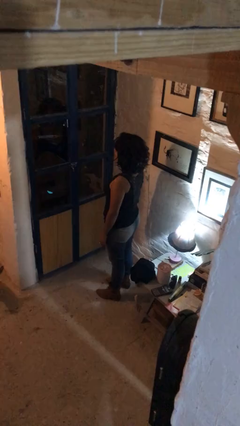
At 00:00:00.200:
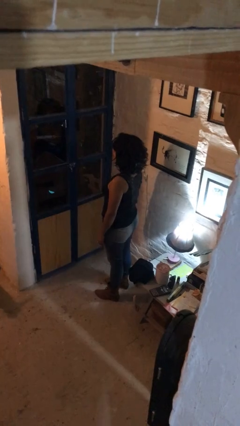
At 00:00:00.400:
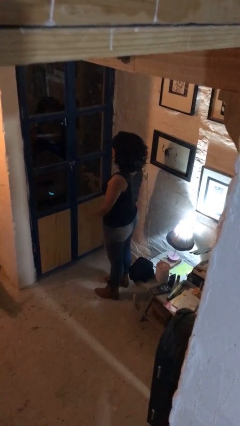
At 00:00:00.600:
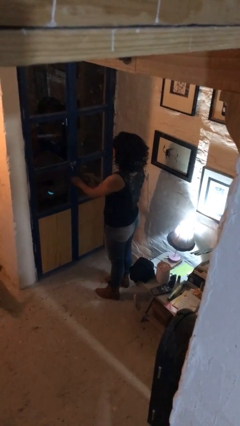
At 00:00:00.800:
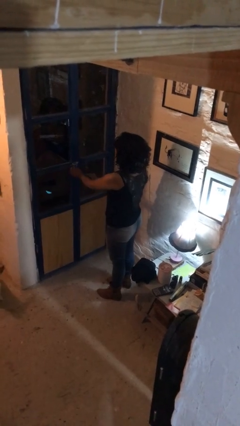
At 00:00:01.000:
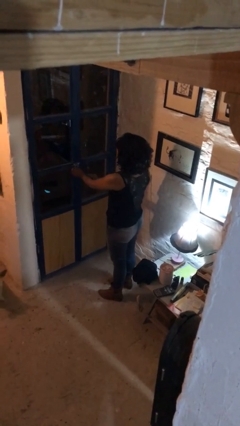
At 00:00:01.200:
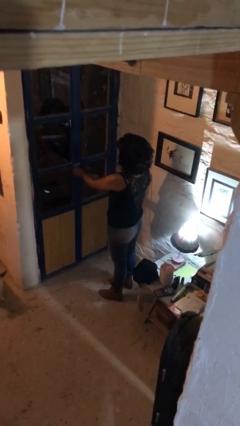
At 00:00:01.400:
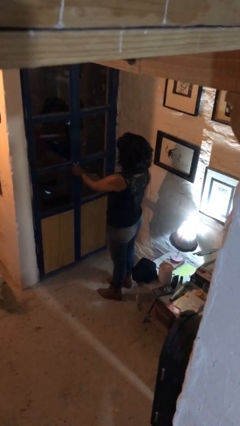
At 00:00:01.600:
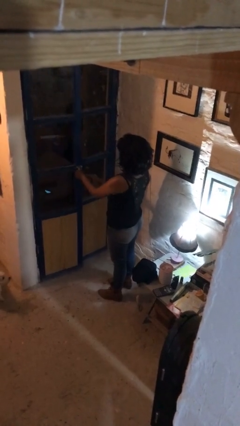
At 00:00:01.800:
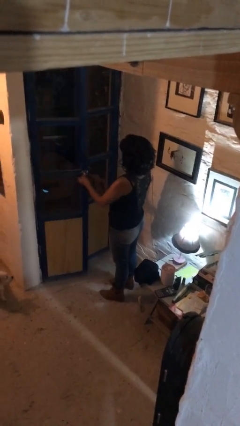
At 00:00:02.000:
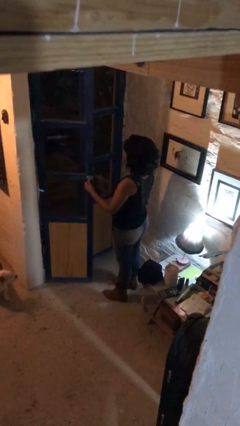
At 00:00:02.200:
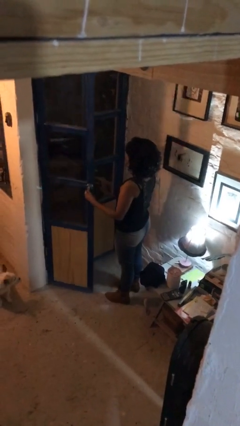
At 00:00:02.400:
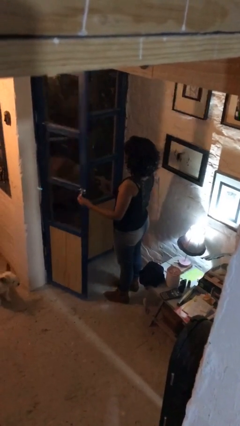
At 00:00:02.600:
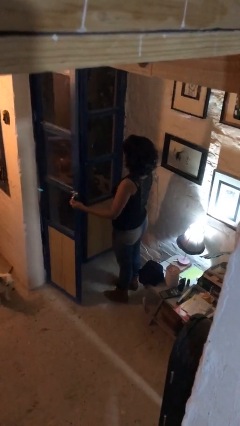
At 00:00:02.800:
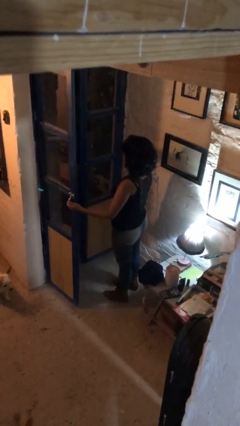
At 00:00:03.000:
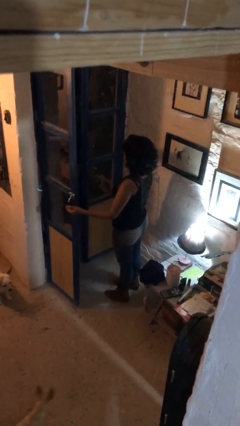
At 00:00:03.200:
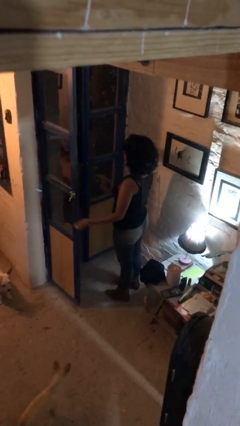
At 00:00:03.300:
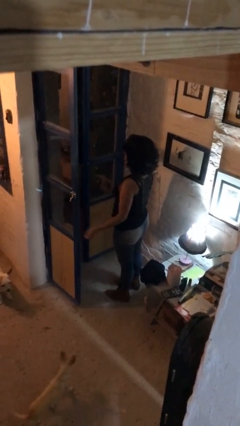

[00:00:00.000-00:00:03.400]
person opens facility door

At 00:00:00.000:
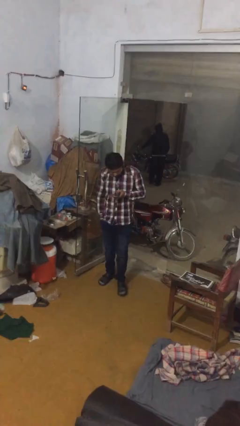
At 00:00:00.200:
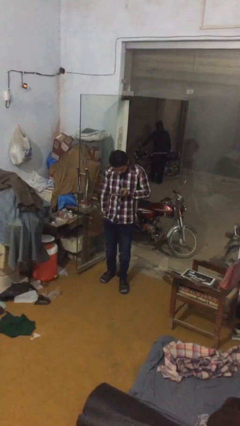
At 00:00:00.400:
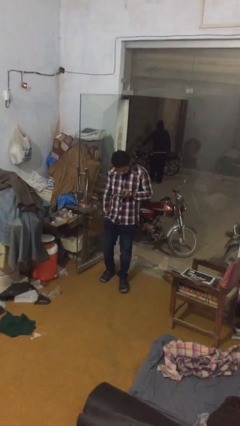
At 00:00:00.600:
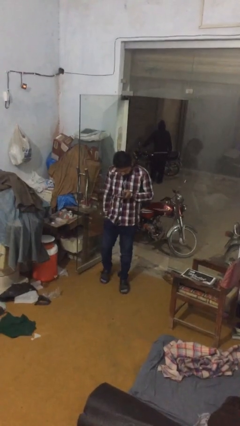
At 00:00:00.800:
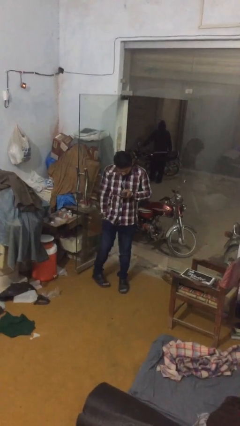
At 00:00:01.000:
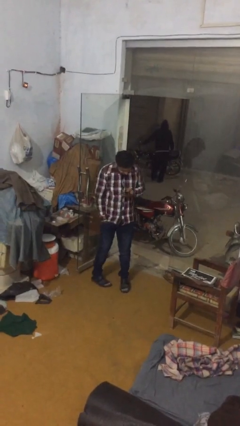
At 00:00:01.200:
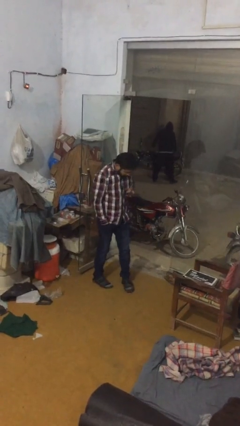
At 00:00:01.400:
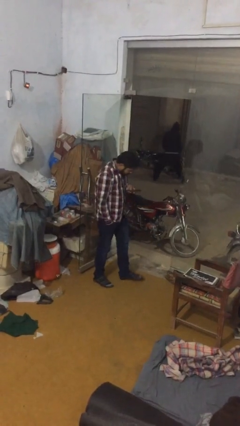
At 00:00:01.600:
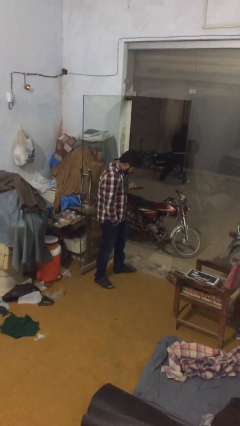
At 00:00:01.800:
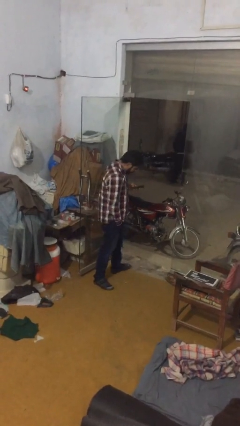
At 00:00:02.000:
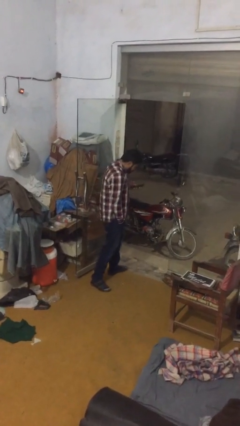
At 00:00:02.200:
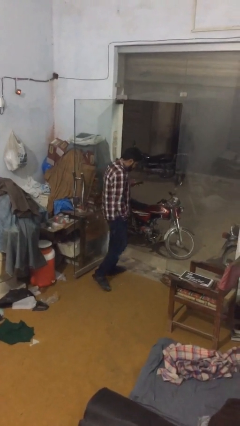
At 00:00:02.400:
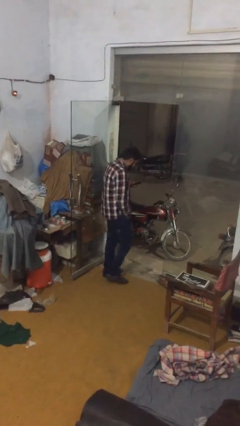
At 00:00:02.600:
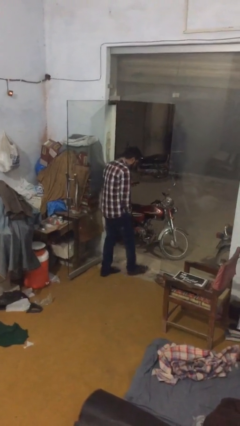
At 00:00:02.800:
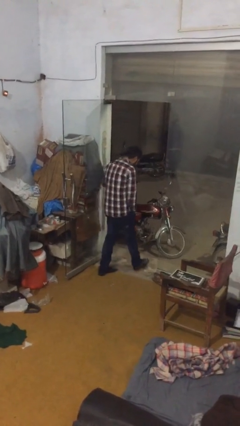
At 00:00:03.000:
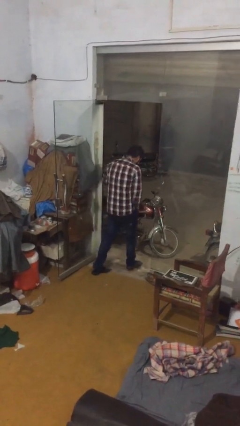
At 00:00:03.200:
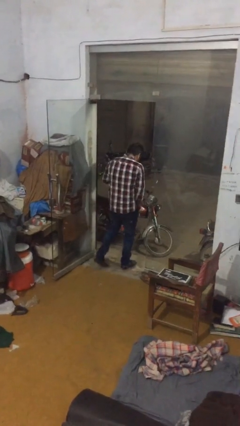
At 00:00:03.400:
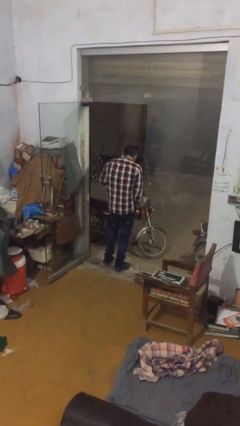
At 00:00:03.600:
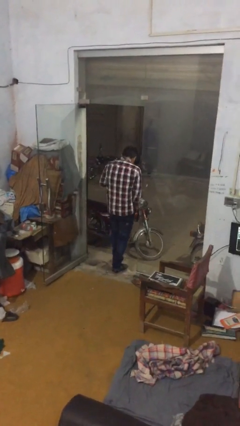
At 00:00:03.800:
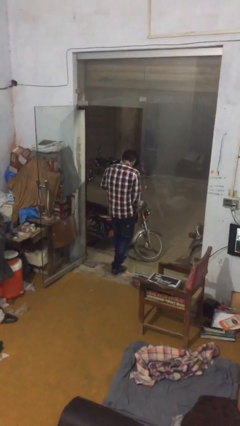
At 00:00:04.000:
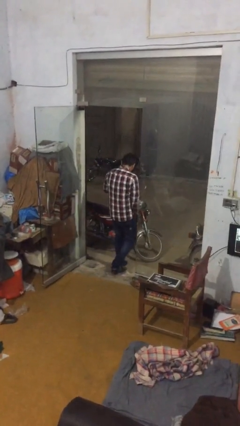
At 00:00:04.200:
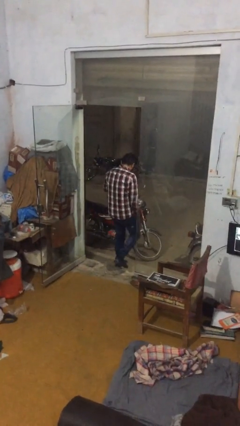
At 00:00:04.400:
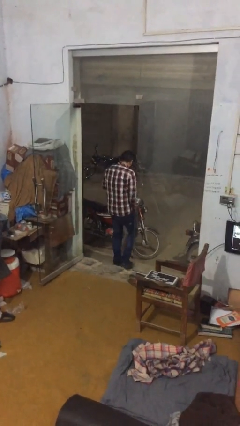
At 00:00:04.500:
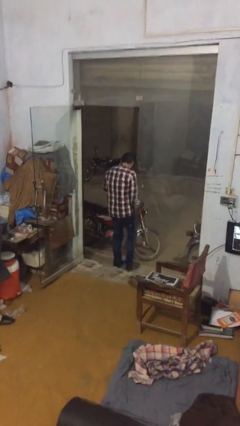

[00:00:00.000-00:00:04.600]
person exits scene through structure

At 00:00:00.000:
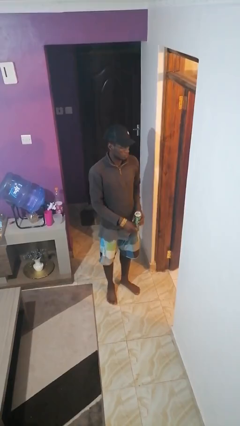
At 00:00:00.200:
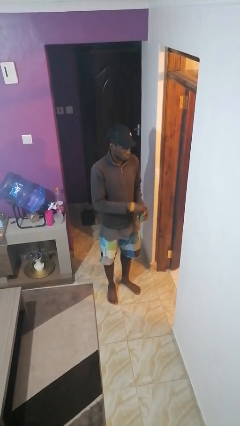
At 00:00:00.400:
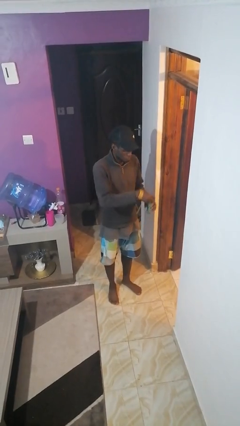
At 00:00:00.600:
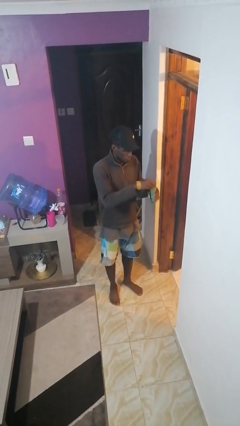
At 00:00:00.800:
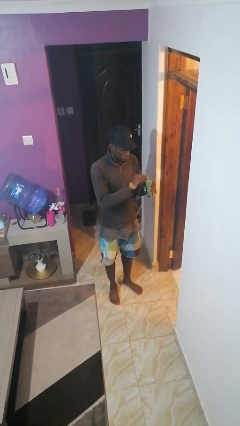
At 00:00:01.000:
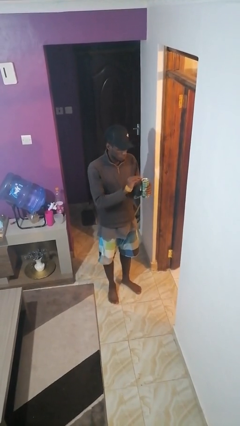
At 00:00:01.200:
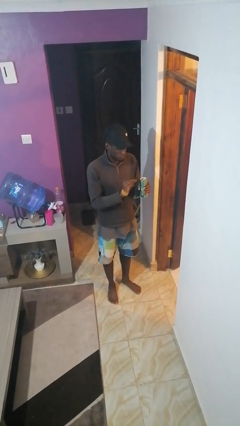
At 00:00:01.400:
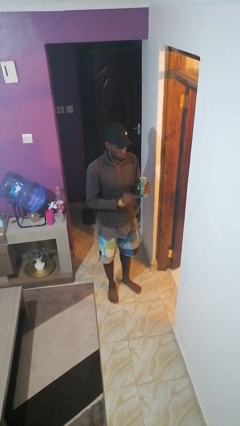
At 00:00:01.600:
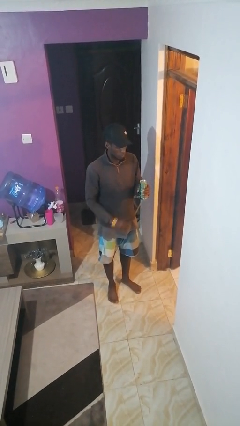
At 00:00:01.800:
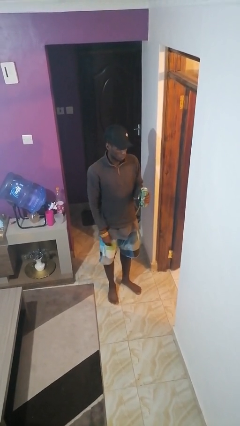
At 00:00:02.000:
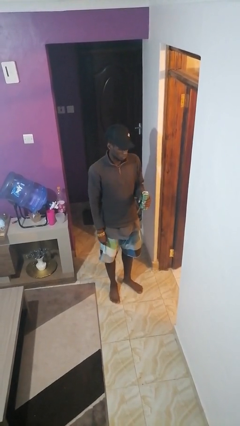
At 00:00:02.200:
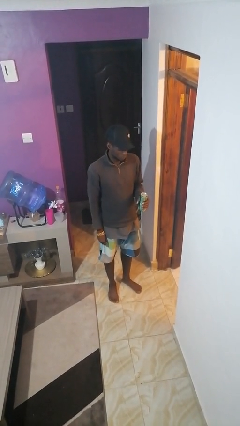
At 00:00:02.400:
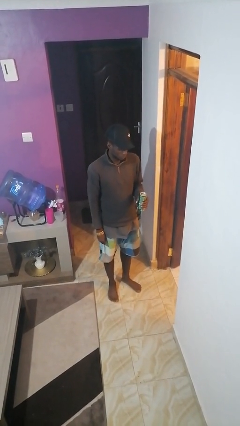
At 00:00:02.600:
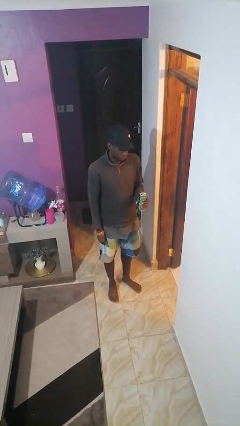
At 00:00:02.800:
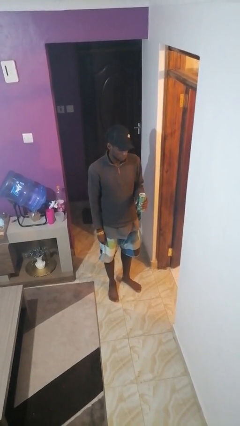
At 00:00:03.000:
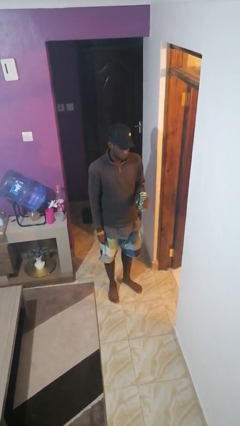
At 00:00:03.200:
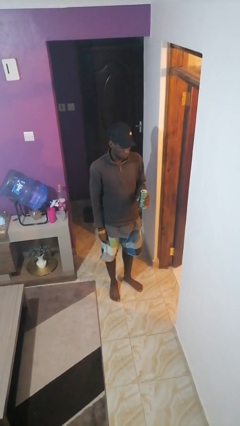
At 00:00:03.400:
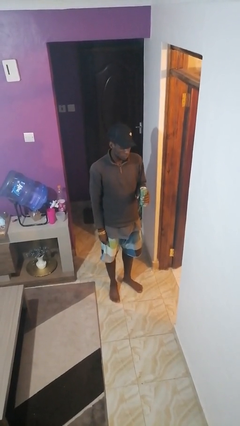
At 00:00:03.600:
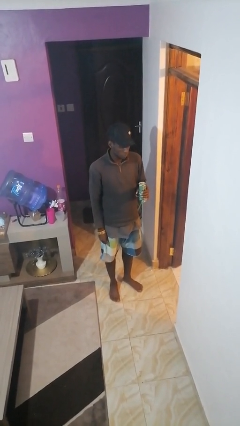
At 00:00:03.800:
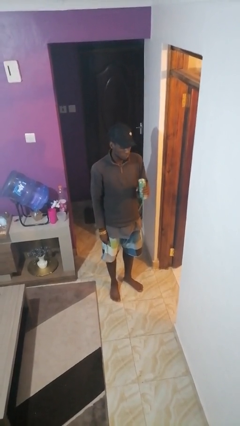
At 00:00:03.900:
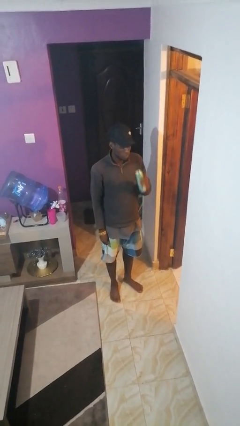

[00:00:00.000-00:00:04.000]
person opens beverage can

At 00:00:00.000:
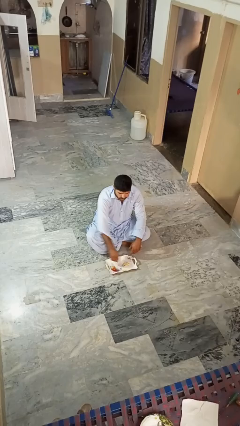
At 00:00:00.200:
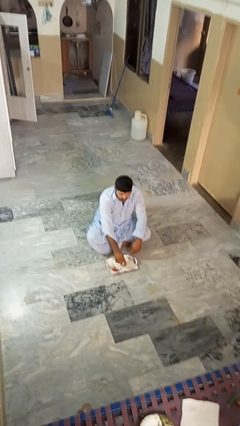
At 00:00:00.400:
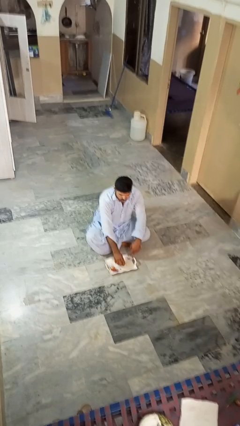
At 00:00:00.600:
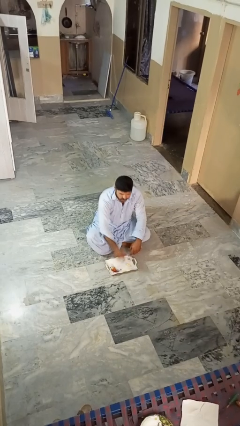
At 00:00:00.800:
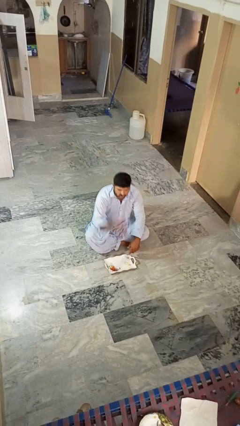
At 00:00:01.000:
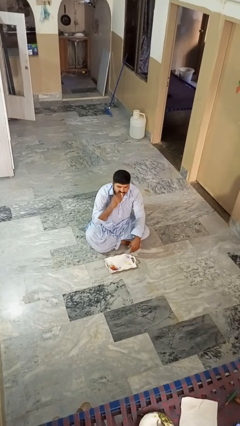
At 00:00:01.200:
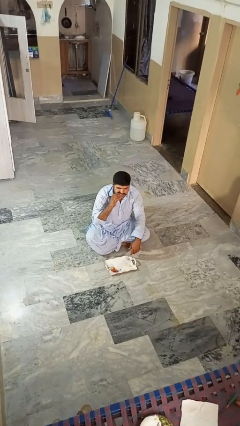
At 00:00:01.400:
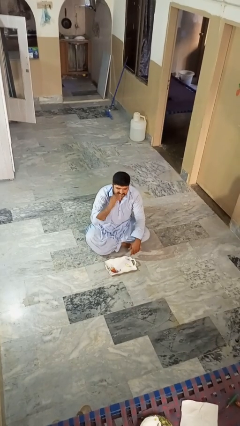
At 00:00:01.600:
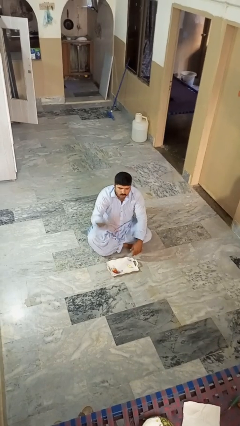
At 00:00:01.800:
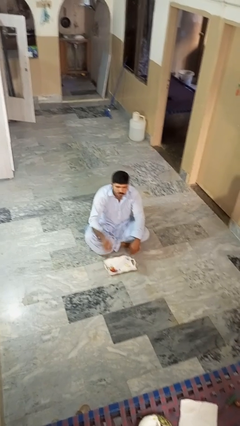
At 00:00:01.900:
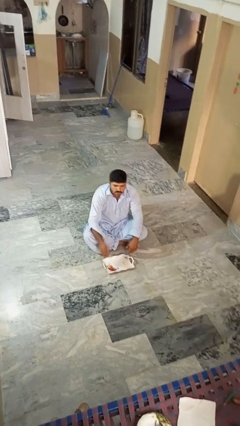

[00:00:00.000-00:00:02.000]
person eats apple

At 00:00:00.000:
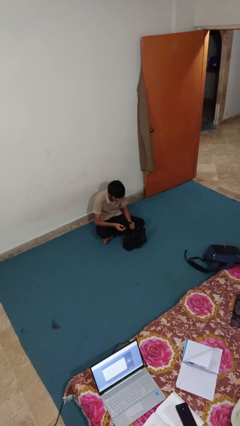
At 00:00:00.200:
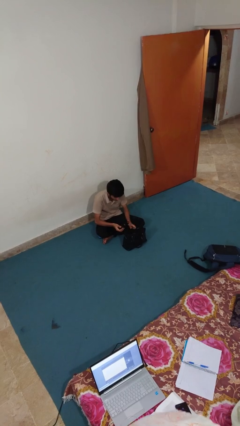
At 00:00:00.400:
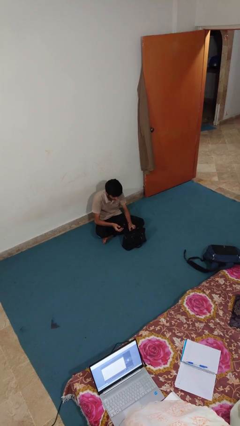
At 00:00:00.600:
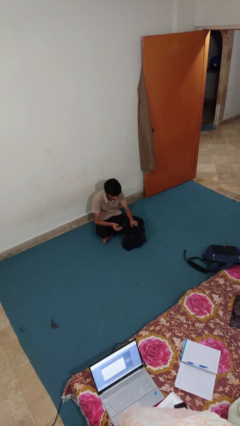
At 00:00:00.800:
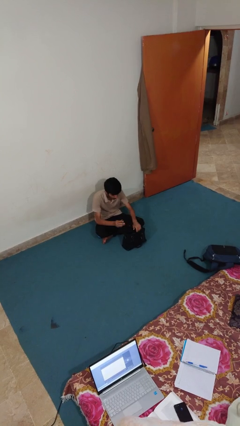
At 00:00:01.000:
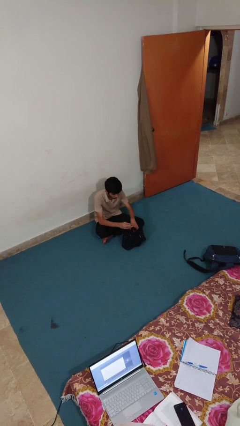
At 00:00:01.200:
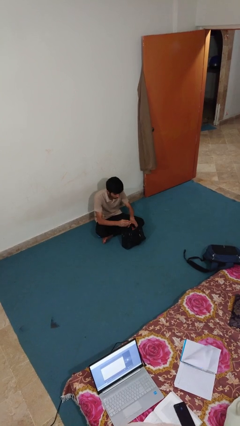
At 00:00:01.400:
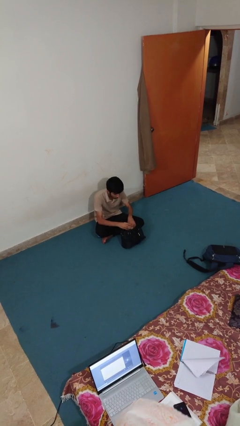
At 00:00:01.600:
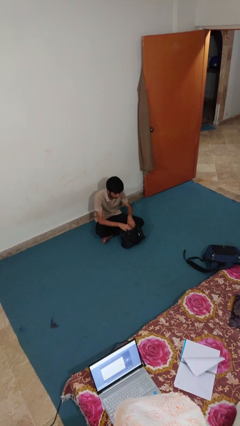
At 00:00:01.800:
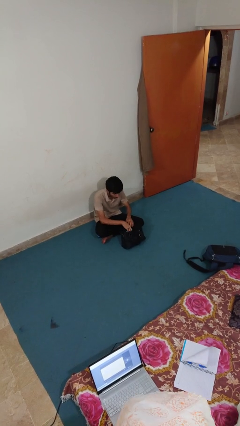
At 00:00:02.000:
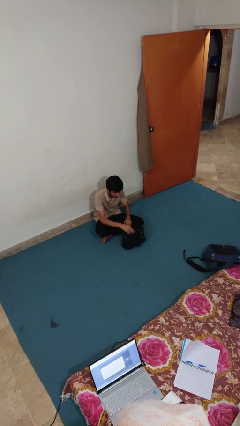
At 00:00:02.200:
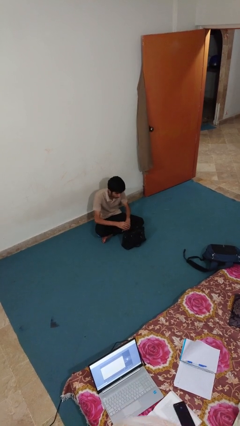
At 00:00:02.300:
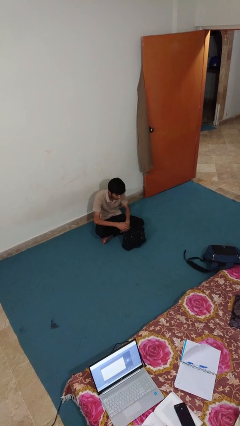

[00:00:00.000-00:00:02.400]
person puts object into purse

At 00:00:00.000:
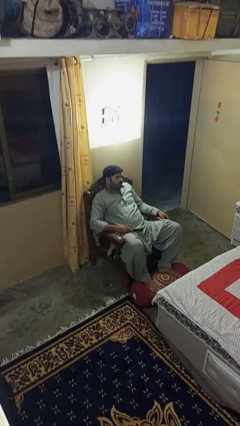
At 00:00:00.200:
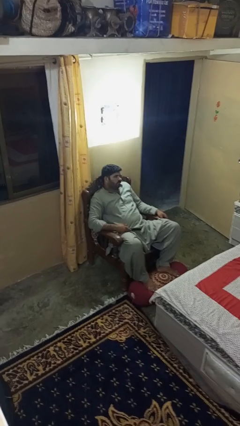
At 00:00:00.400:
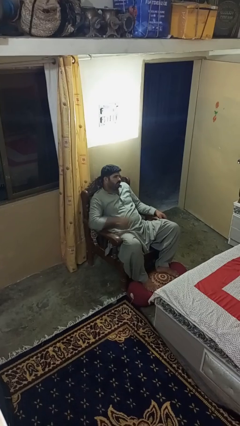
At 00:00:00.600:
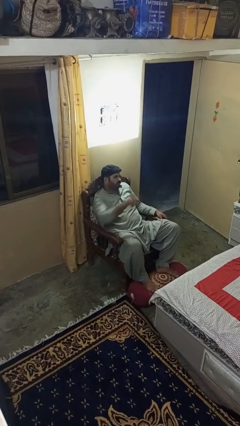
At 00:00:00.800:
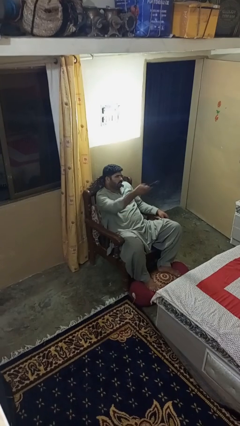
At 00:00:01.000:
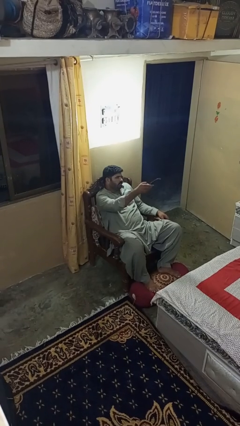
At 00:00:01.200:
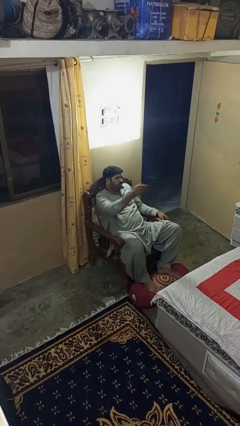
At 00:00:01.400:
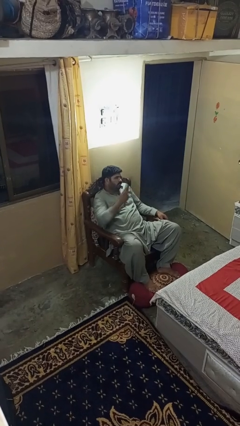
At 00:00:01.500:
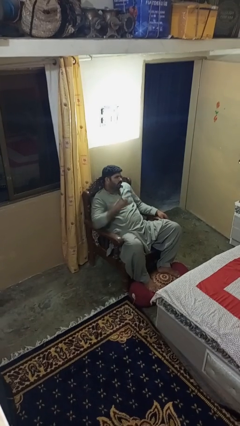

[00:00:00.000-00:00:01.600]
person uses television remote
